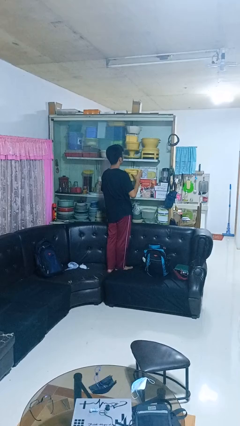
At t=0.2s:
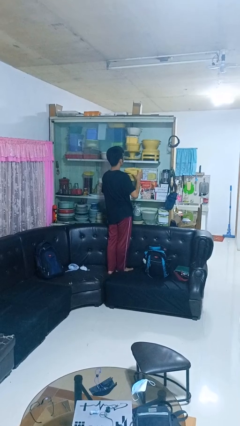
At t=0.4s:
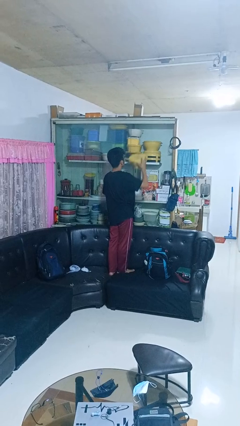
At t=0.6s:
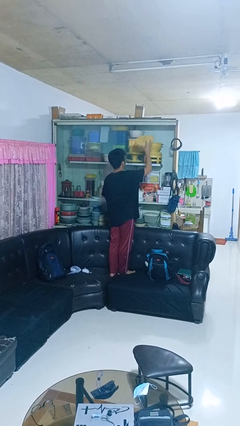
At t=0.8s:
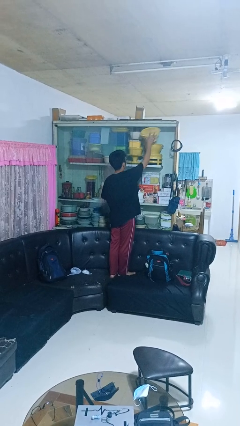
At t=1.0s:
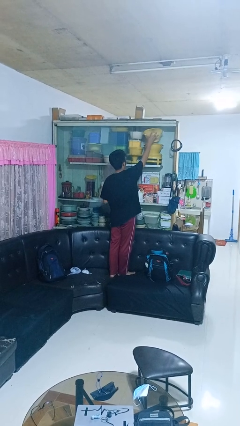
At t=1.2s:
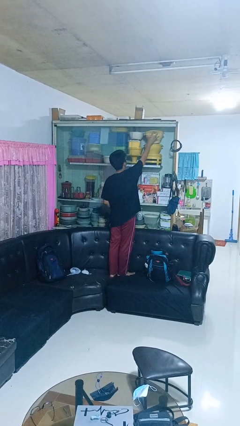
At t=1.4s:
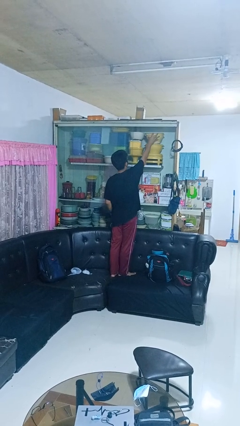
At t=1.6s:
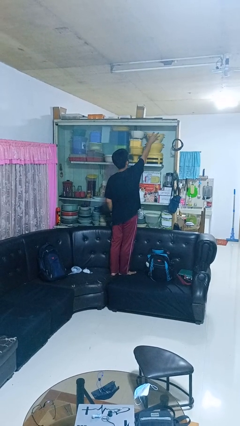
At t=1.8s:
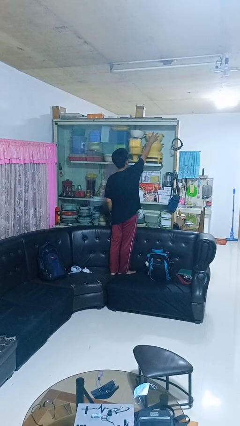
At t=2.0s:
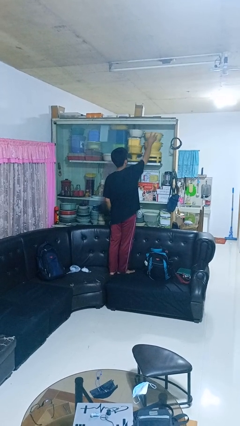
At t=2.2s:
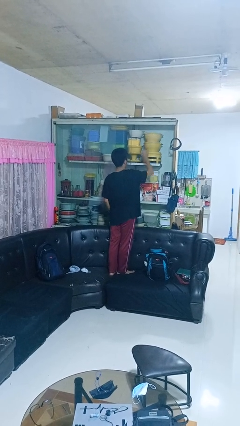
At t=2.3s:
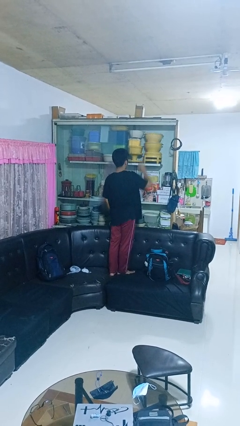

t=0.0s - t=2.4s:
person puts down object into cabinet

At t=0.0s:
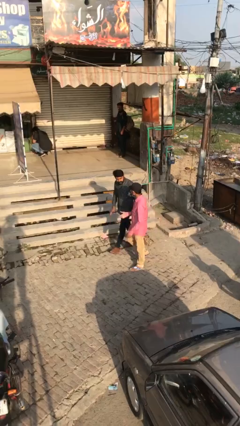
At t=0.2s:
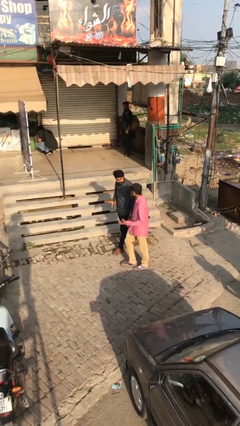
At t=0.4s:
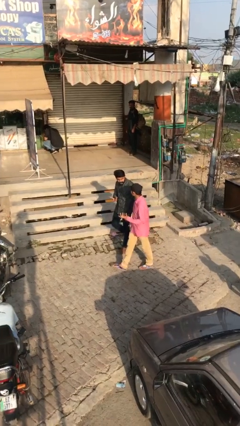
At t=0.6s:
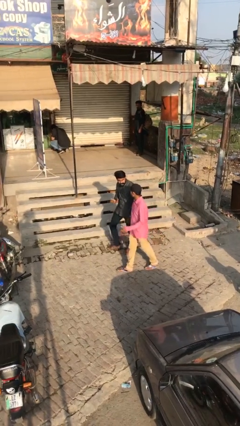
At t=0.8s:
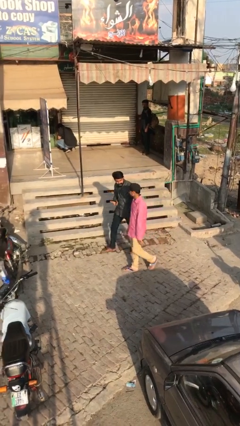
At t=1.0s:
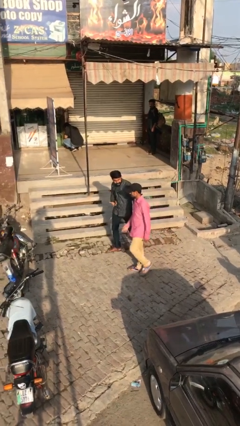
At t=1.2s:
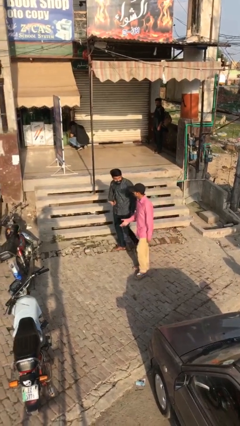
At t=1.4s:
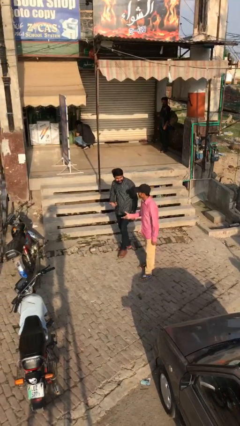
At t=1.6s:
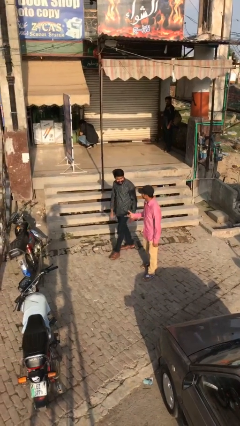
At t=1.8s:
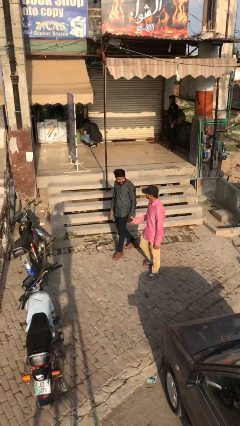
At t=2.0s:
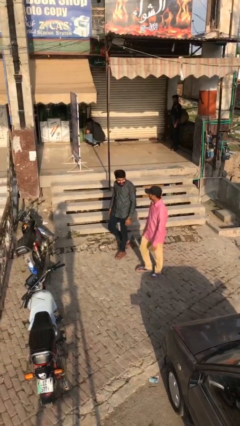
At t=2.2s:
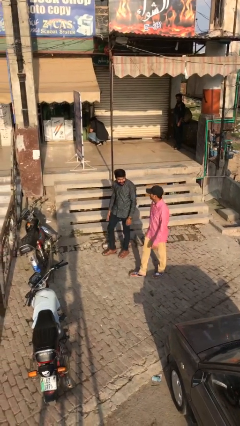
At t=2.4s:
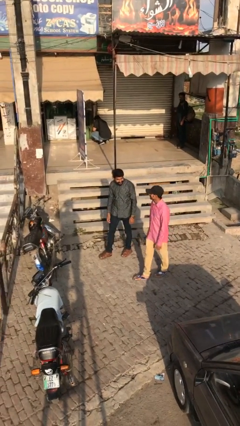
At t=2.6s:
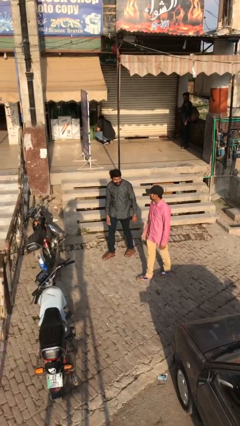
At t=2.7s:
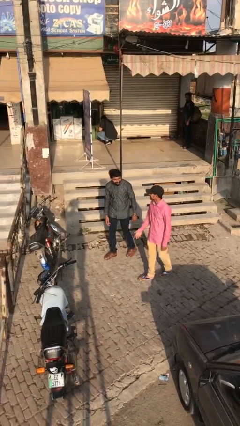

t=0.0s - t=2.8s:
person talks to person

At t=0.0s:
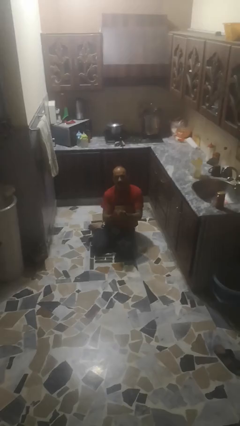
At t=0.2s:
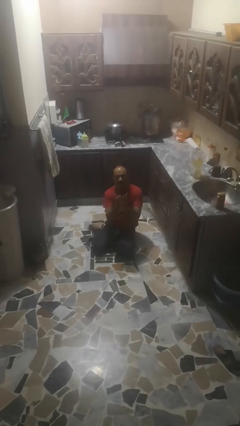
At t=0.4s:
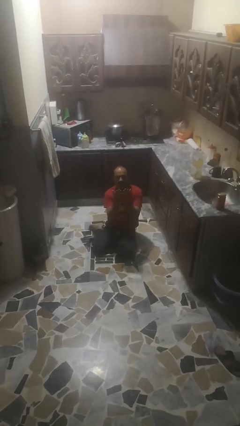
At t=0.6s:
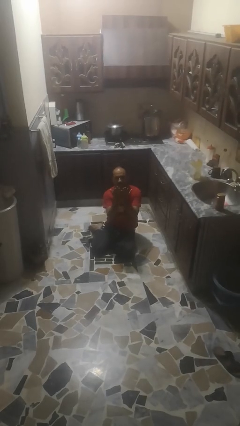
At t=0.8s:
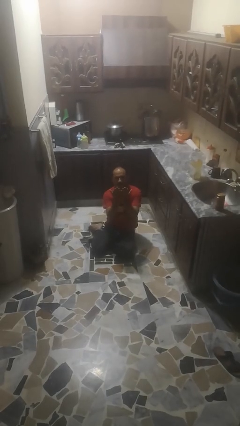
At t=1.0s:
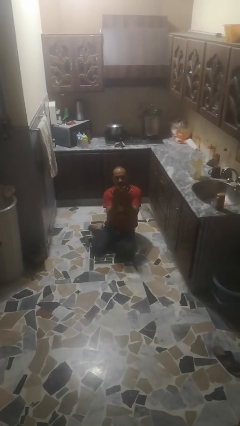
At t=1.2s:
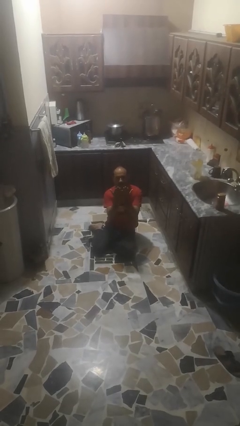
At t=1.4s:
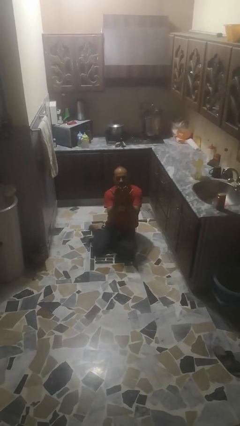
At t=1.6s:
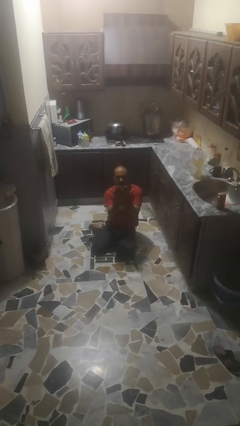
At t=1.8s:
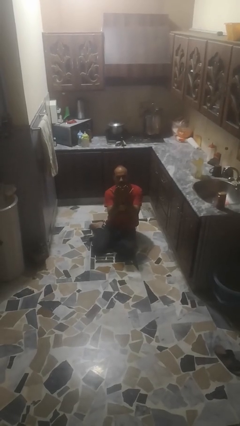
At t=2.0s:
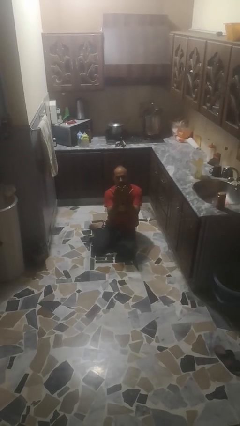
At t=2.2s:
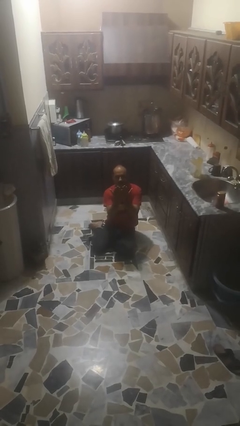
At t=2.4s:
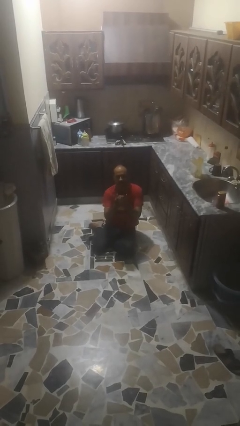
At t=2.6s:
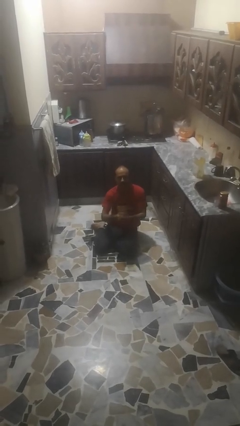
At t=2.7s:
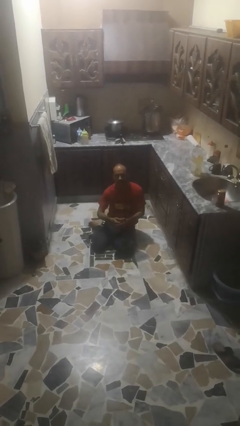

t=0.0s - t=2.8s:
person prays

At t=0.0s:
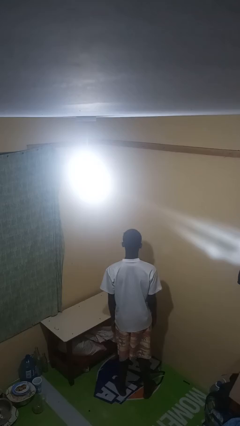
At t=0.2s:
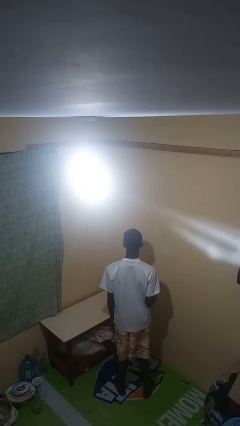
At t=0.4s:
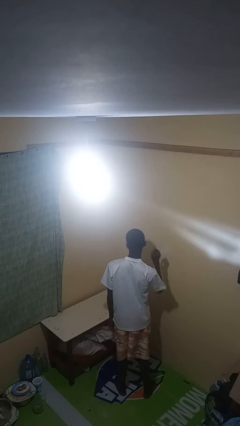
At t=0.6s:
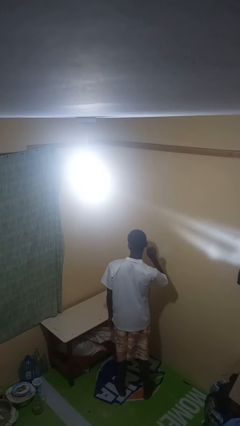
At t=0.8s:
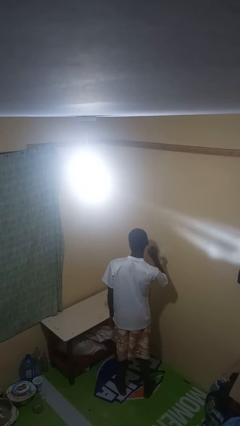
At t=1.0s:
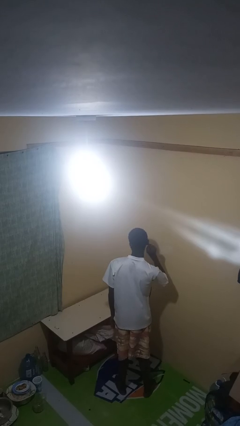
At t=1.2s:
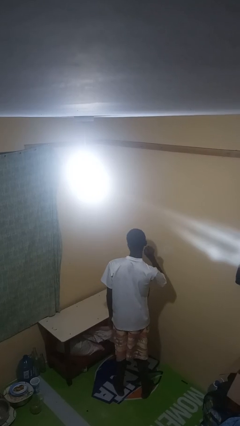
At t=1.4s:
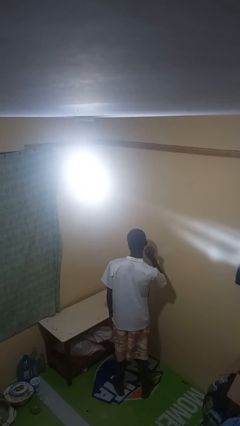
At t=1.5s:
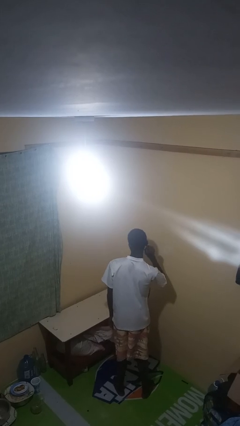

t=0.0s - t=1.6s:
person gestures listen closely

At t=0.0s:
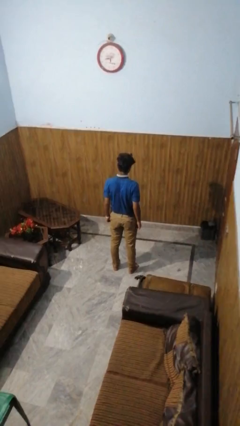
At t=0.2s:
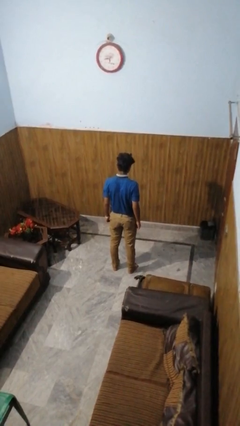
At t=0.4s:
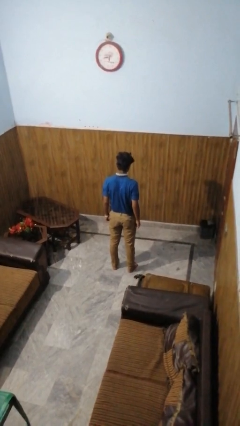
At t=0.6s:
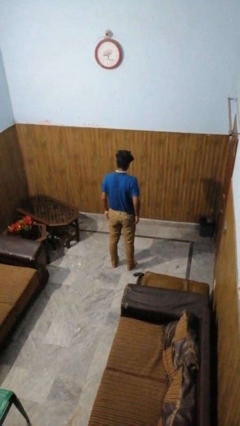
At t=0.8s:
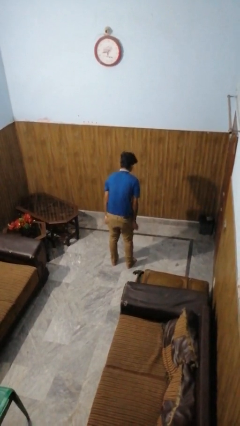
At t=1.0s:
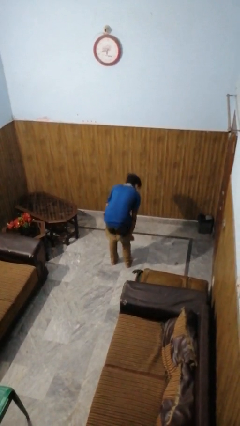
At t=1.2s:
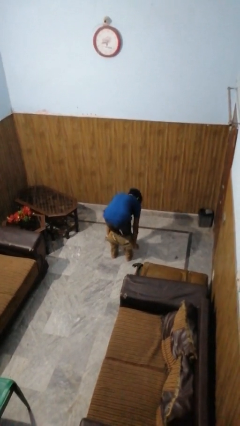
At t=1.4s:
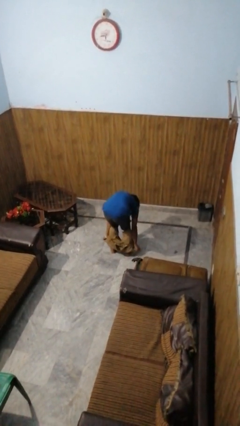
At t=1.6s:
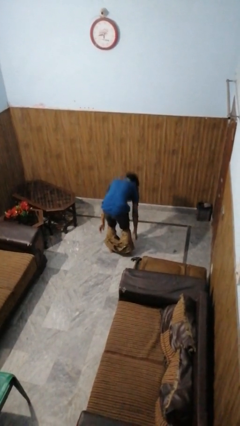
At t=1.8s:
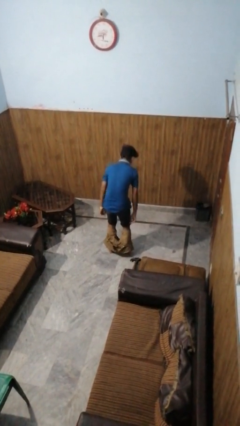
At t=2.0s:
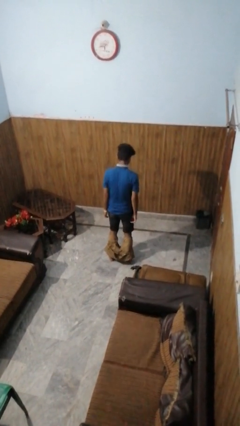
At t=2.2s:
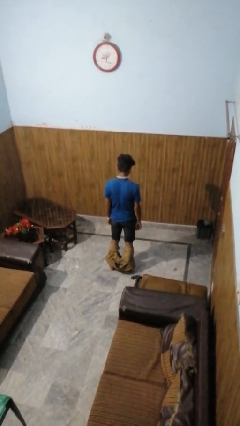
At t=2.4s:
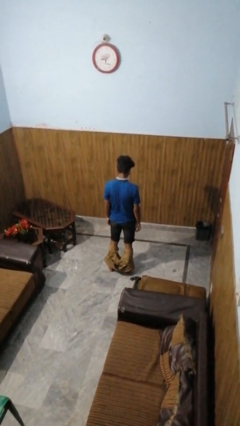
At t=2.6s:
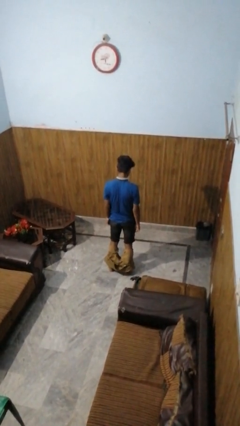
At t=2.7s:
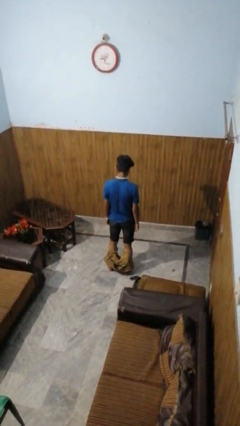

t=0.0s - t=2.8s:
person takes off pants

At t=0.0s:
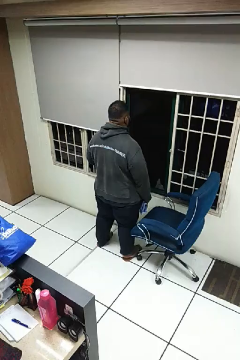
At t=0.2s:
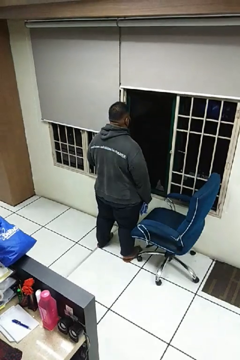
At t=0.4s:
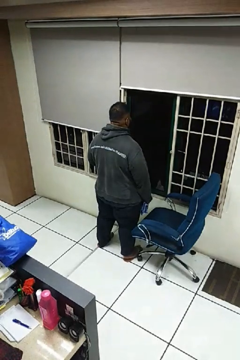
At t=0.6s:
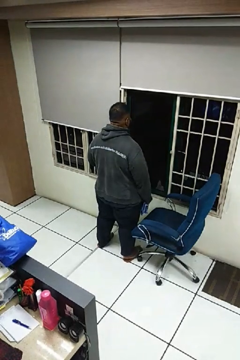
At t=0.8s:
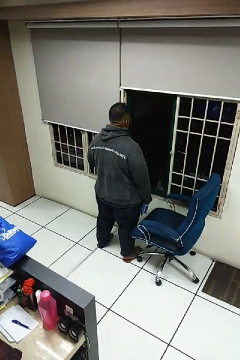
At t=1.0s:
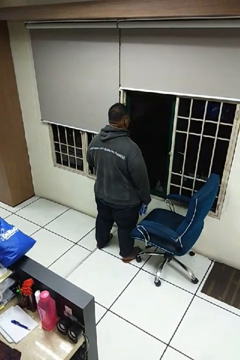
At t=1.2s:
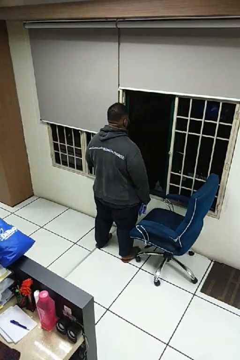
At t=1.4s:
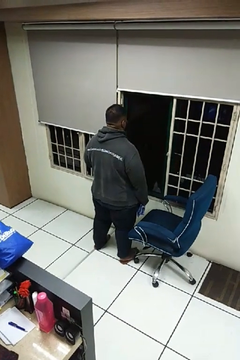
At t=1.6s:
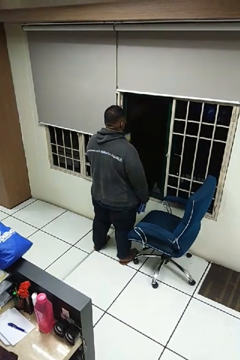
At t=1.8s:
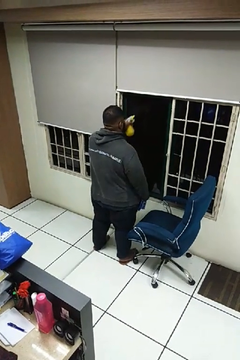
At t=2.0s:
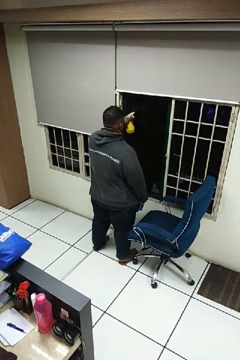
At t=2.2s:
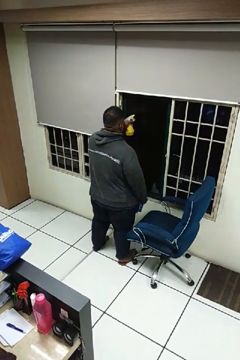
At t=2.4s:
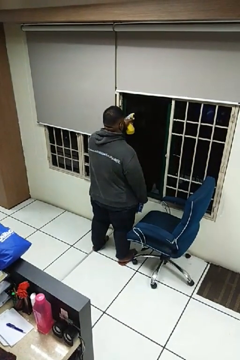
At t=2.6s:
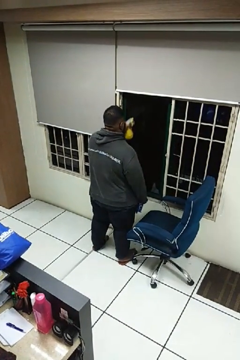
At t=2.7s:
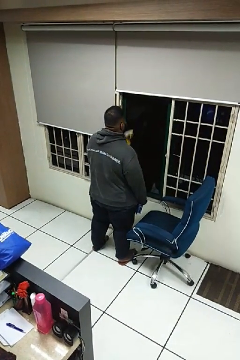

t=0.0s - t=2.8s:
person sprays from bottle

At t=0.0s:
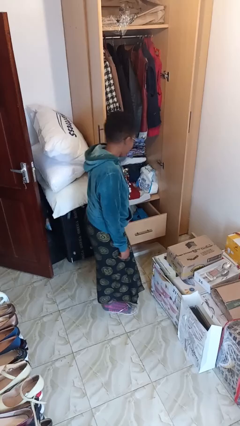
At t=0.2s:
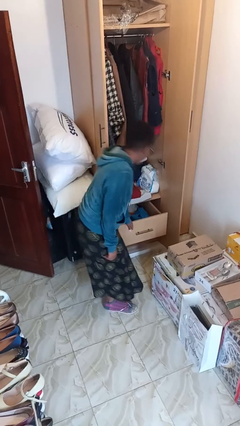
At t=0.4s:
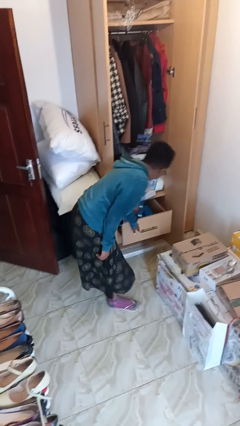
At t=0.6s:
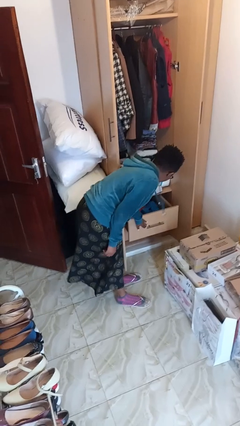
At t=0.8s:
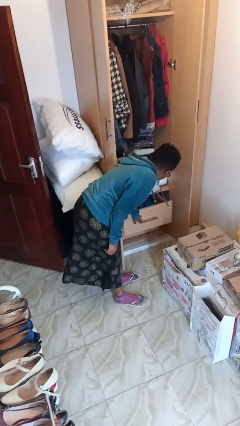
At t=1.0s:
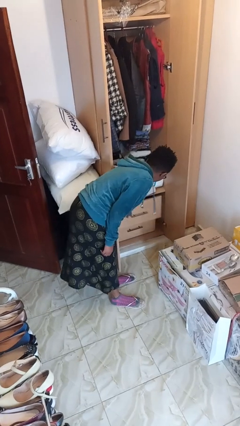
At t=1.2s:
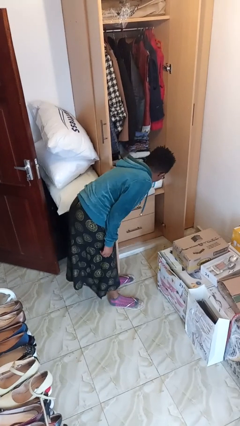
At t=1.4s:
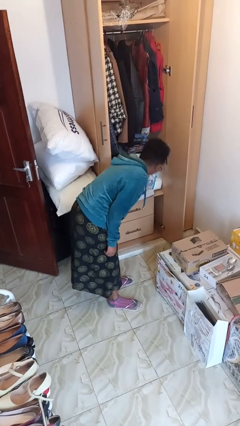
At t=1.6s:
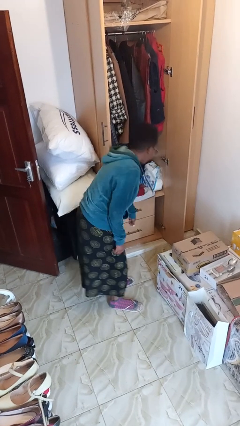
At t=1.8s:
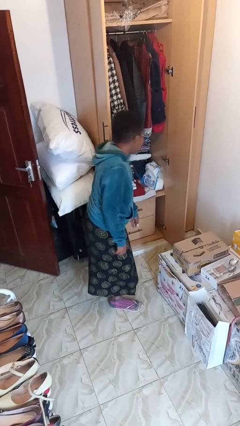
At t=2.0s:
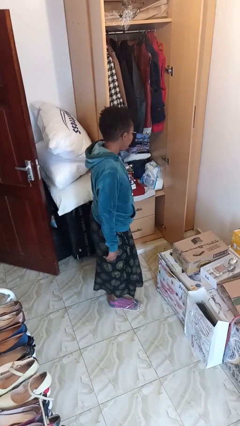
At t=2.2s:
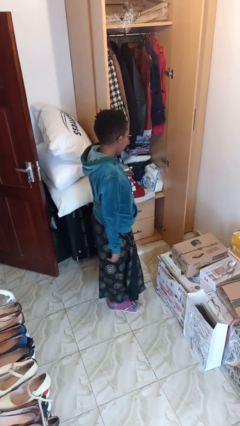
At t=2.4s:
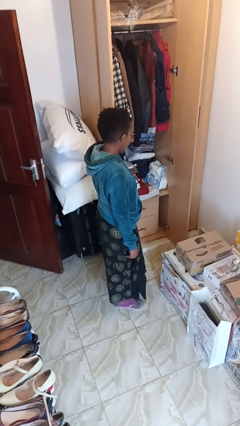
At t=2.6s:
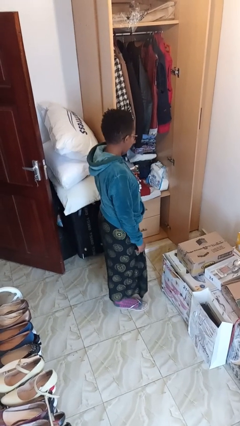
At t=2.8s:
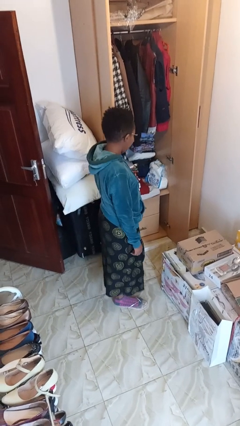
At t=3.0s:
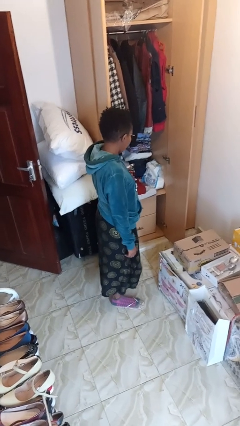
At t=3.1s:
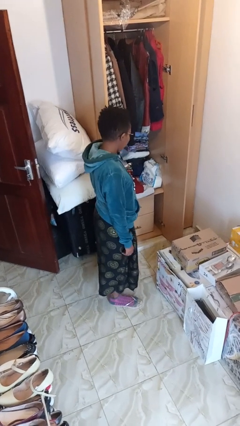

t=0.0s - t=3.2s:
person closes dresser drawer
